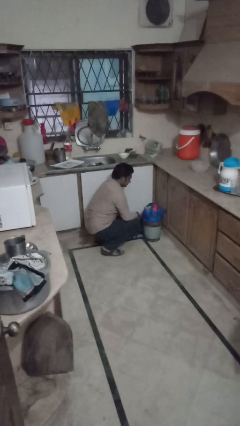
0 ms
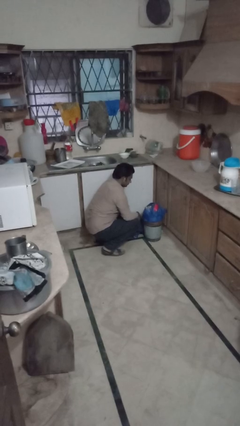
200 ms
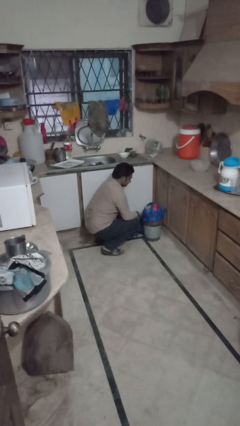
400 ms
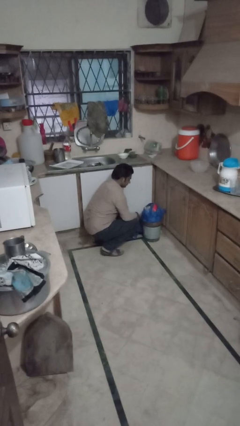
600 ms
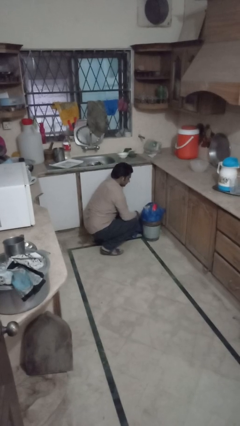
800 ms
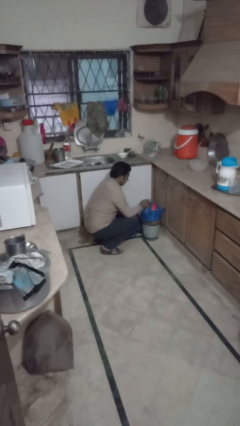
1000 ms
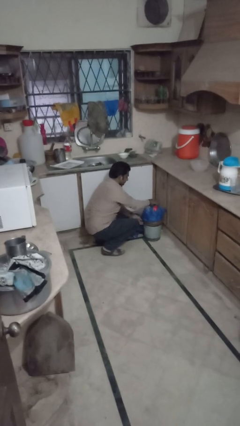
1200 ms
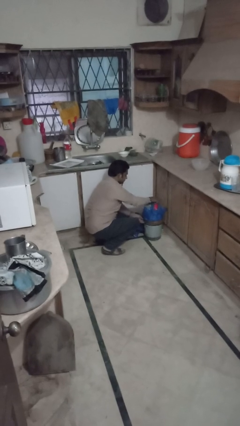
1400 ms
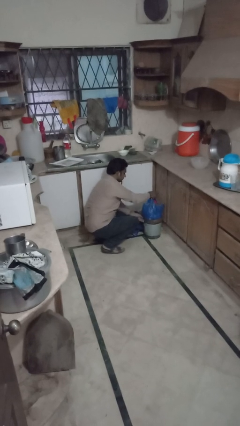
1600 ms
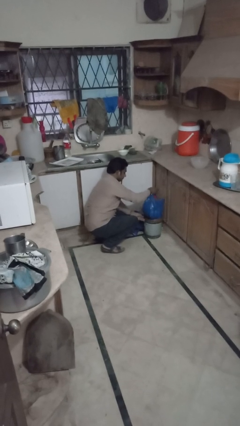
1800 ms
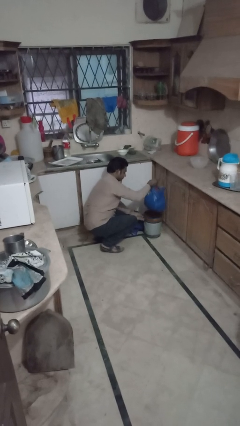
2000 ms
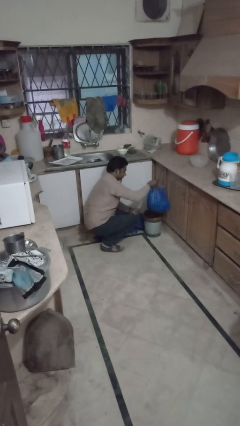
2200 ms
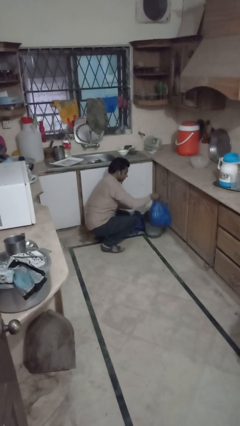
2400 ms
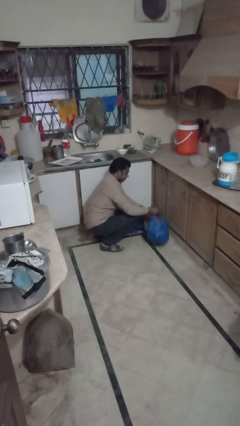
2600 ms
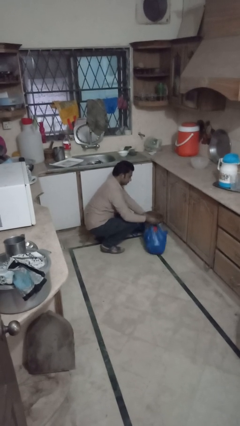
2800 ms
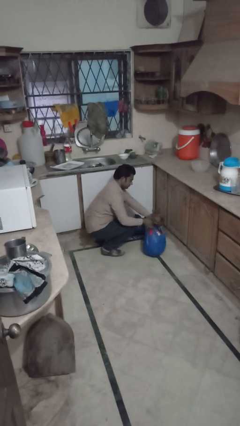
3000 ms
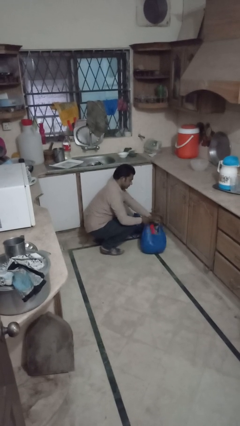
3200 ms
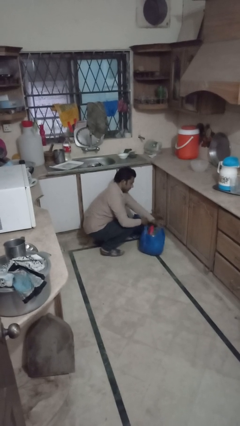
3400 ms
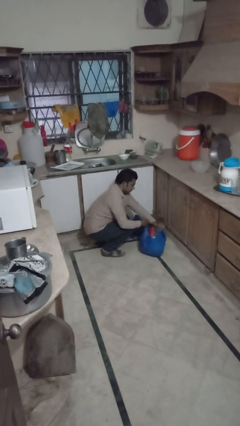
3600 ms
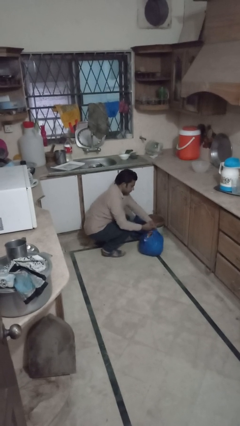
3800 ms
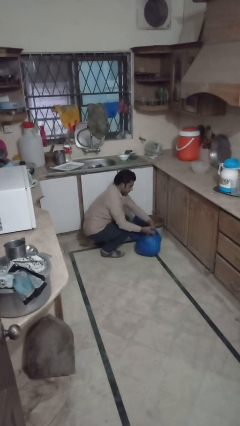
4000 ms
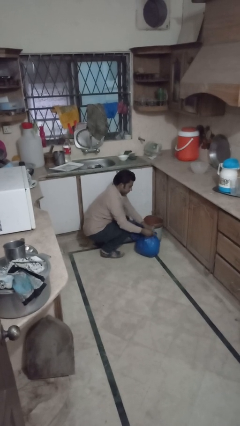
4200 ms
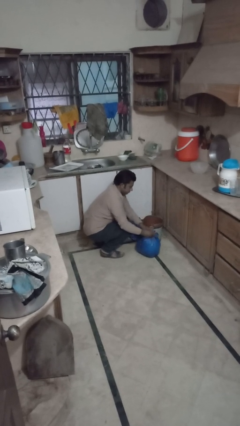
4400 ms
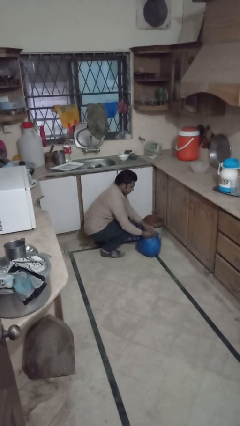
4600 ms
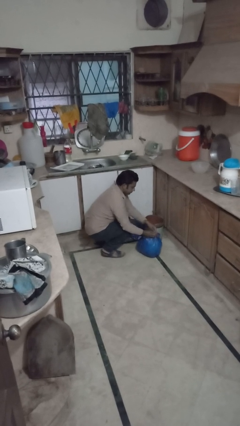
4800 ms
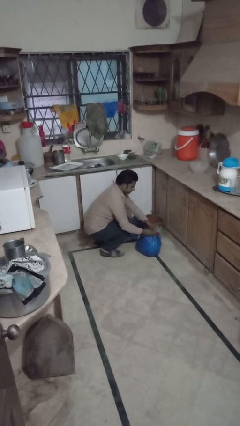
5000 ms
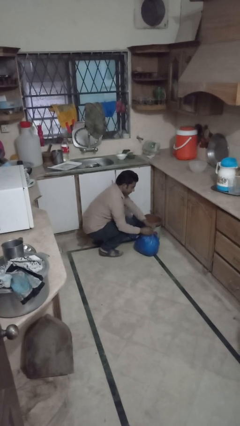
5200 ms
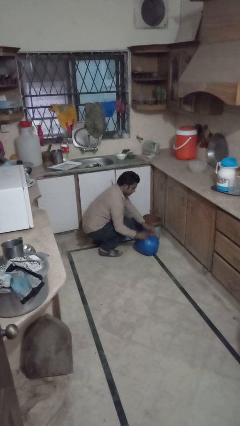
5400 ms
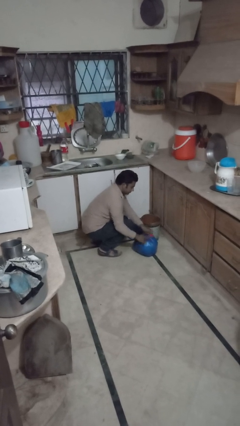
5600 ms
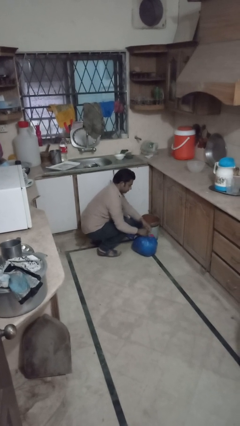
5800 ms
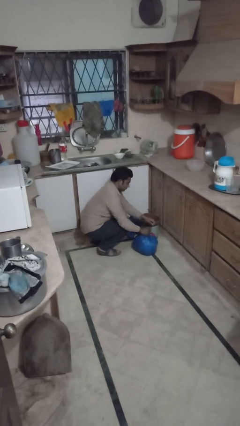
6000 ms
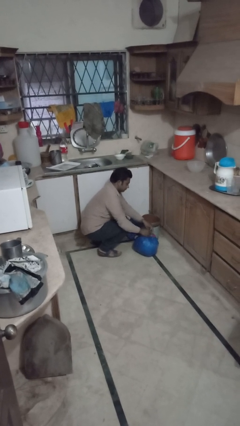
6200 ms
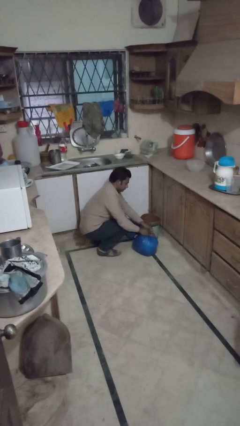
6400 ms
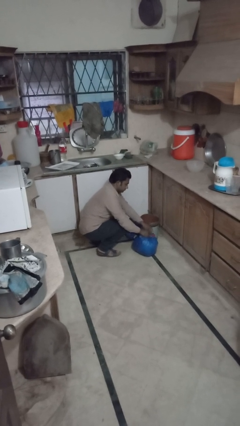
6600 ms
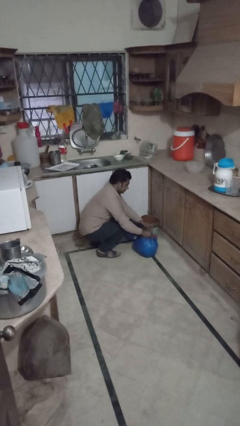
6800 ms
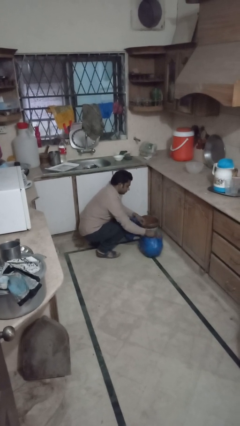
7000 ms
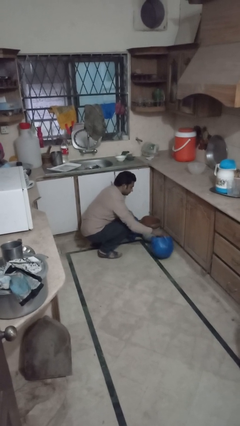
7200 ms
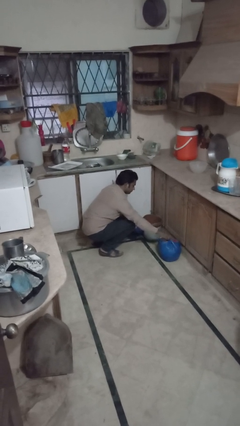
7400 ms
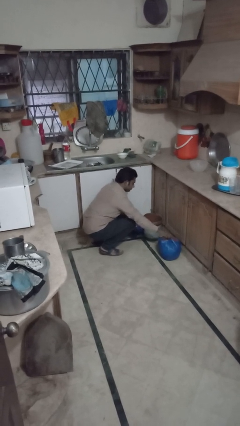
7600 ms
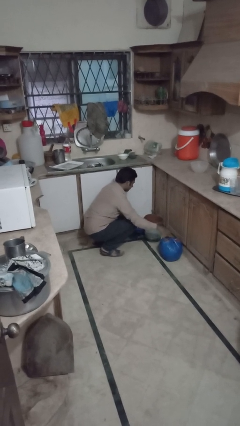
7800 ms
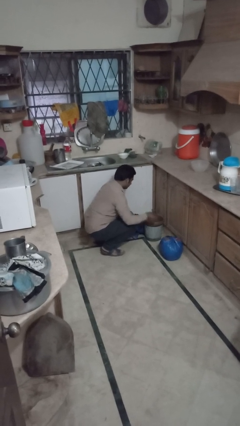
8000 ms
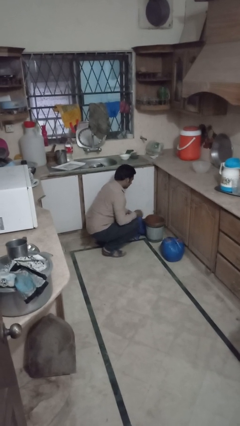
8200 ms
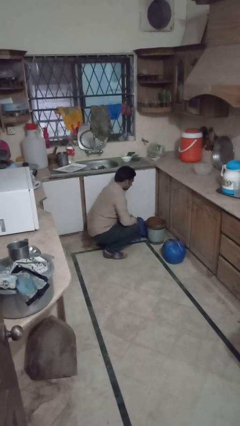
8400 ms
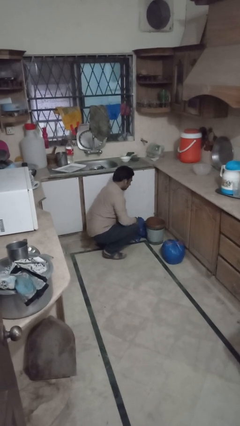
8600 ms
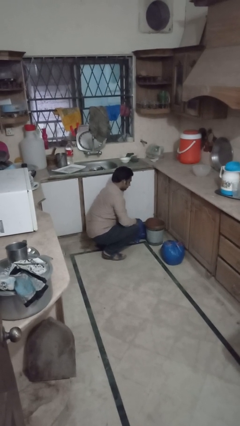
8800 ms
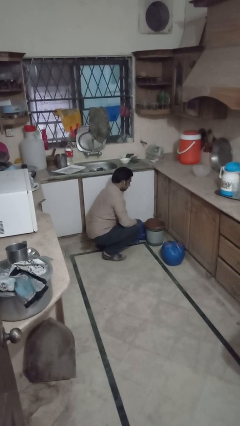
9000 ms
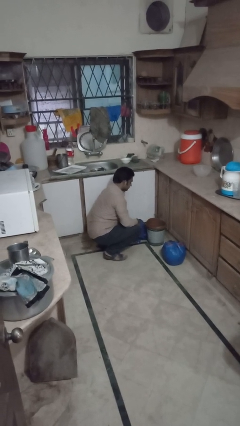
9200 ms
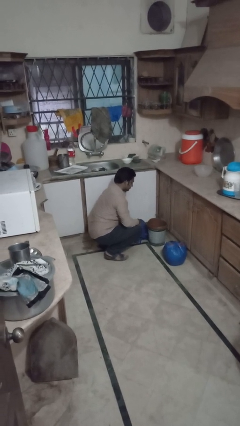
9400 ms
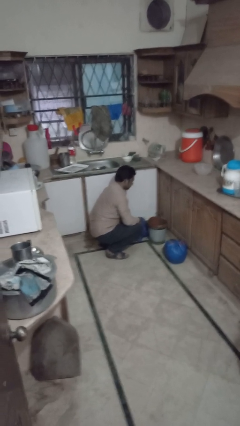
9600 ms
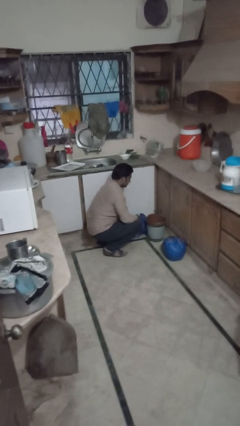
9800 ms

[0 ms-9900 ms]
person removes trashbag from trashcan

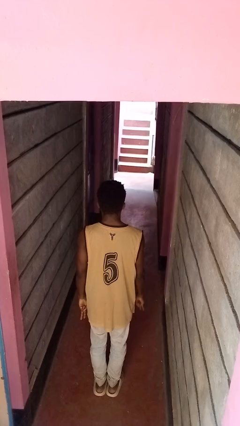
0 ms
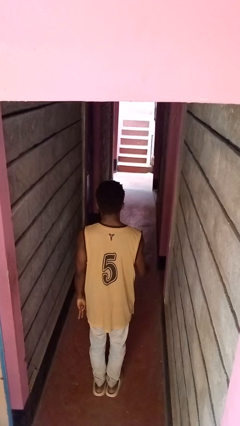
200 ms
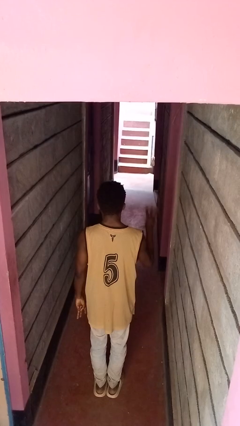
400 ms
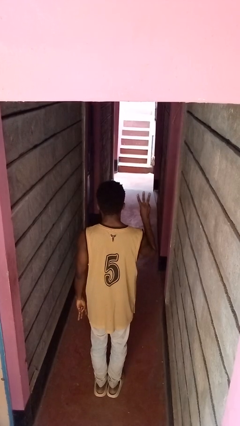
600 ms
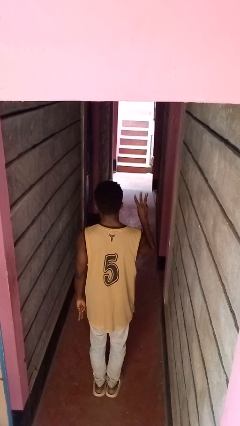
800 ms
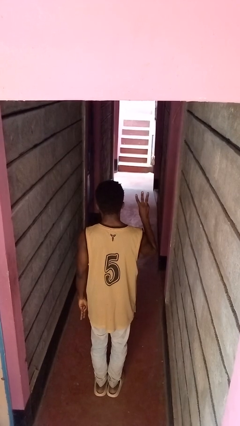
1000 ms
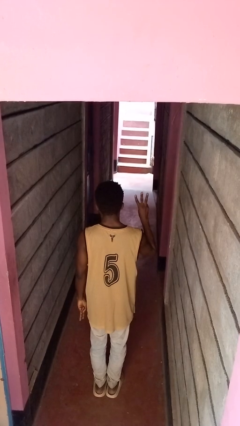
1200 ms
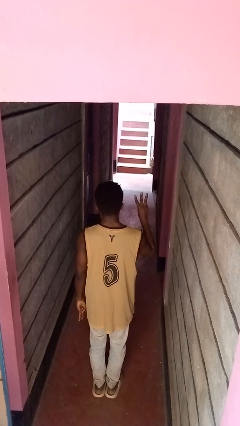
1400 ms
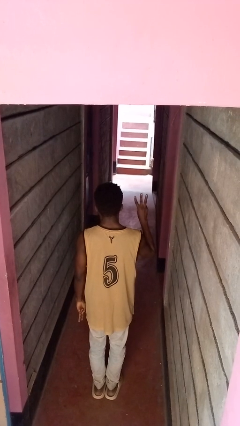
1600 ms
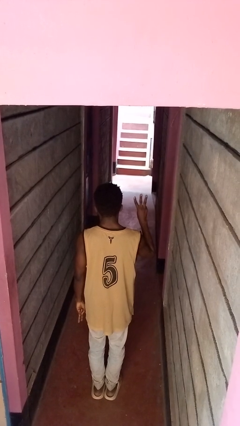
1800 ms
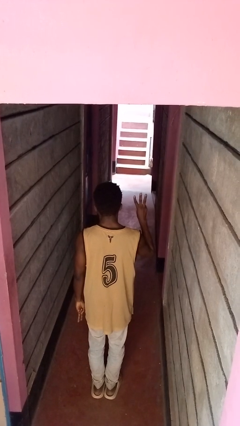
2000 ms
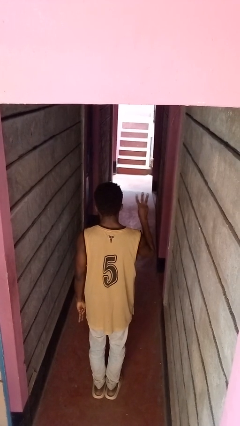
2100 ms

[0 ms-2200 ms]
person gestures number three

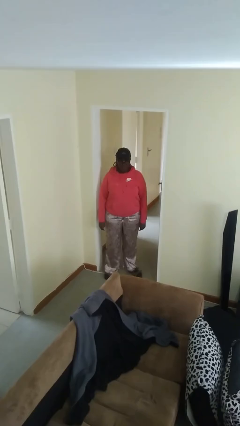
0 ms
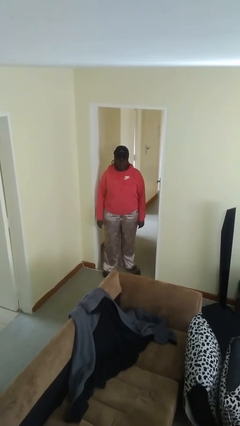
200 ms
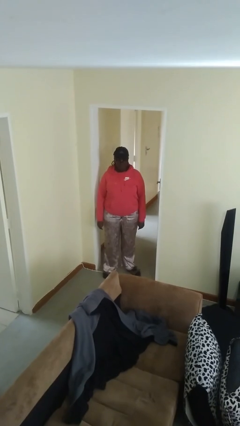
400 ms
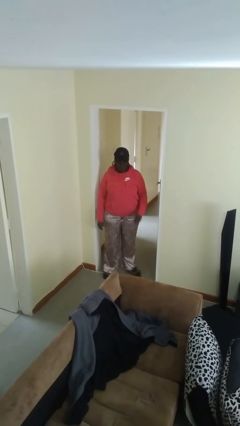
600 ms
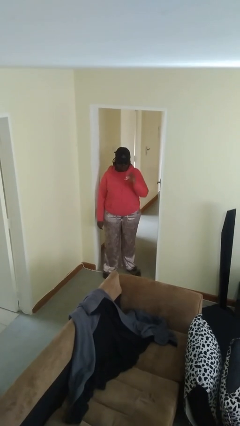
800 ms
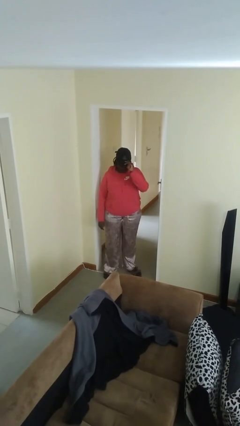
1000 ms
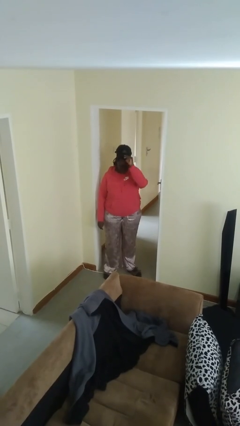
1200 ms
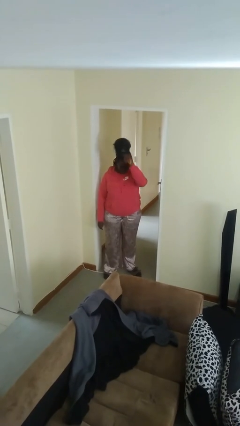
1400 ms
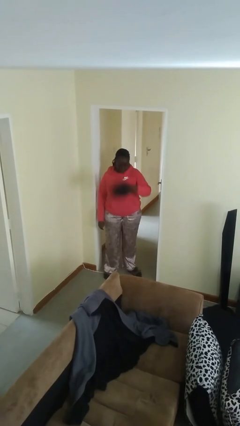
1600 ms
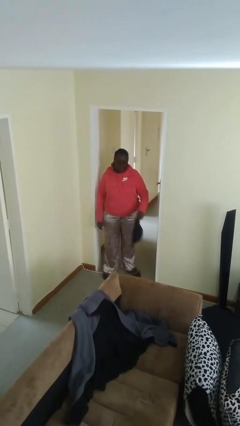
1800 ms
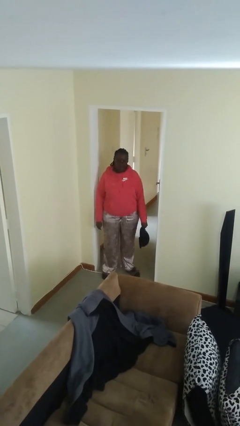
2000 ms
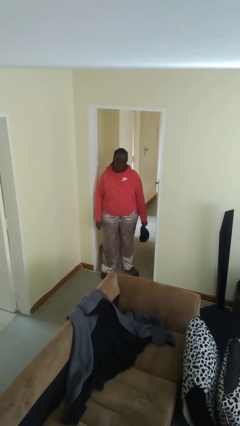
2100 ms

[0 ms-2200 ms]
person takes off hat

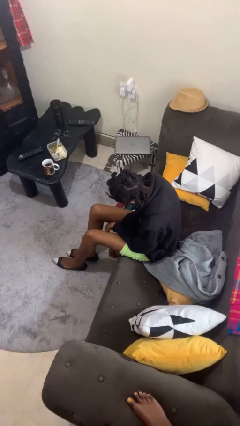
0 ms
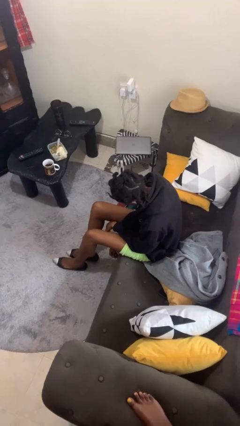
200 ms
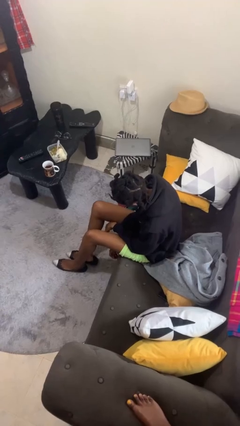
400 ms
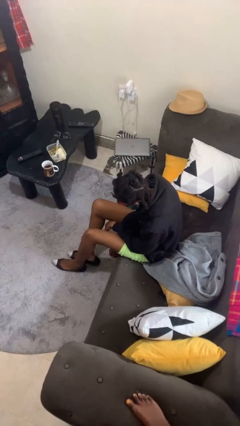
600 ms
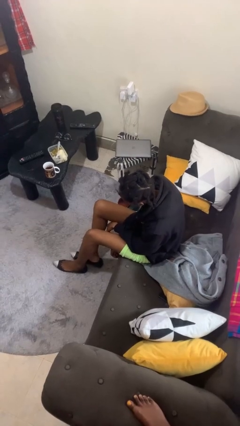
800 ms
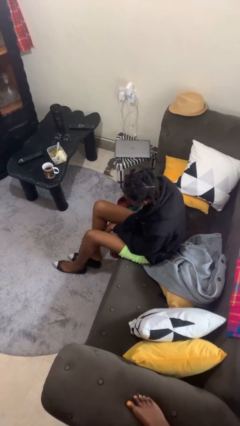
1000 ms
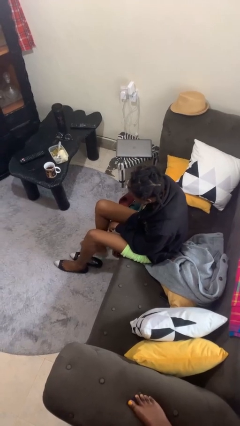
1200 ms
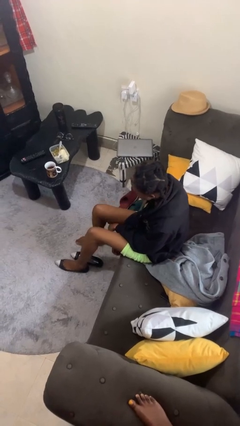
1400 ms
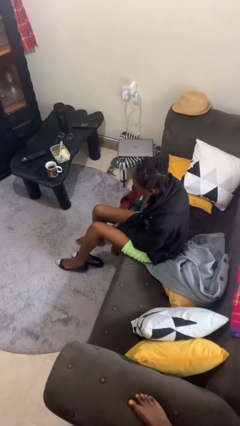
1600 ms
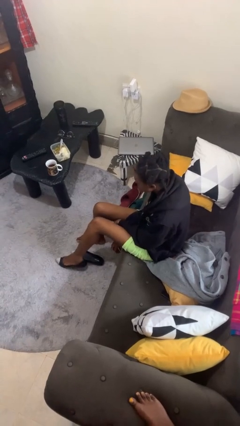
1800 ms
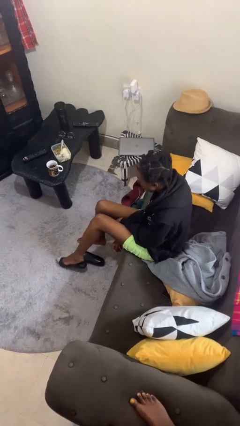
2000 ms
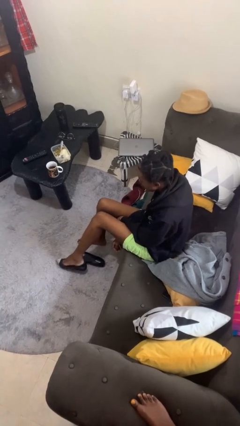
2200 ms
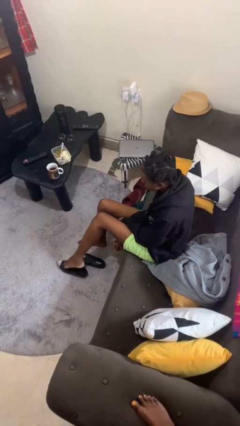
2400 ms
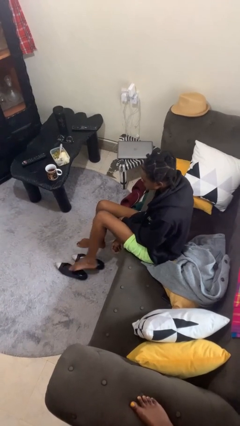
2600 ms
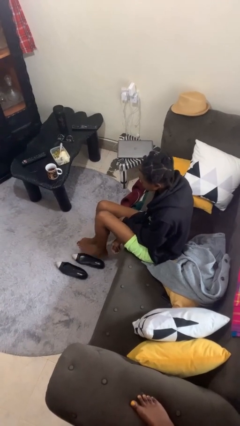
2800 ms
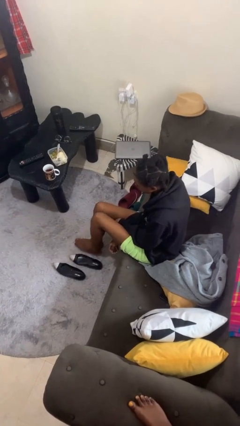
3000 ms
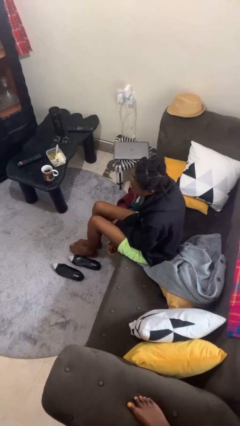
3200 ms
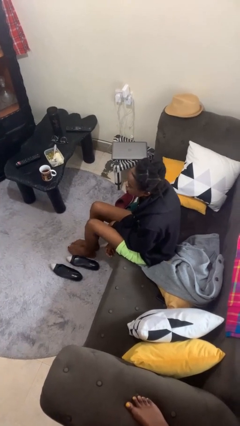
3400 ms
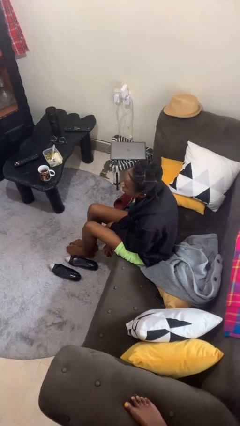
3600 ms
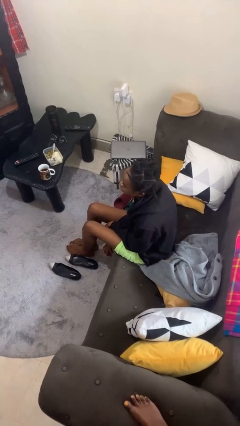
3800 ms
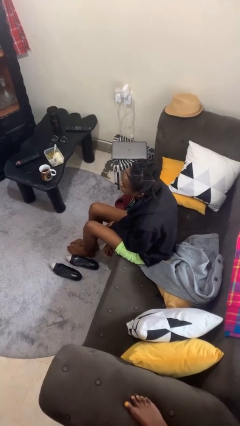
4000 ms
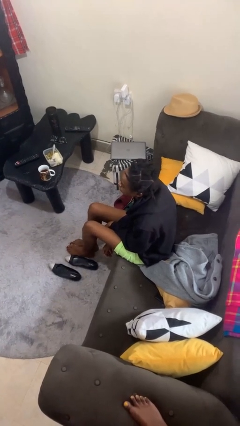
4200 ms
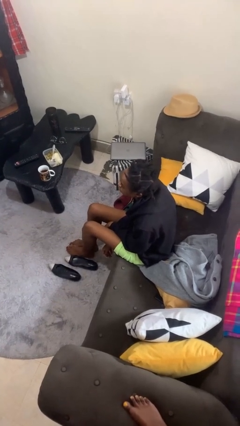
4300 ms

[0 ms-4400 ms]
person takes off shoes
